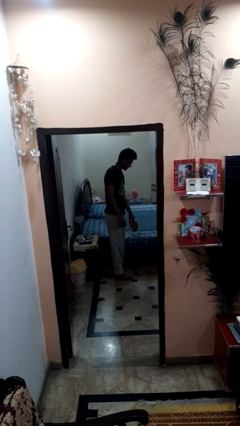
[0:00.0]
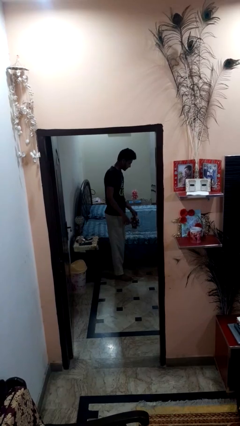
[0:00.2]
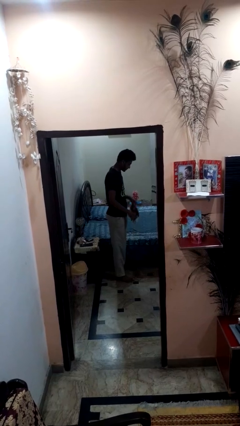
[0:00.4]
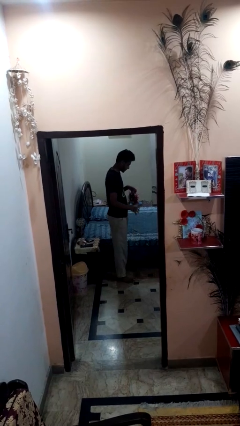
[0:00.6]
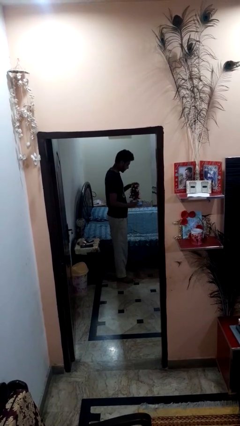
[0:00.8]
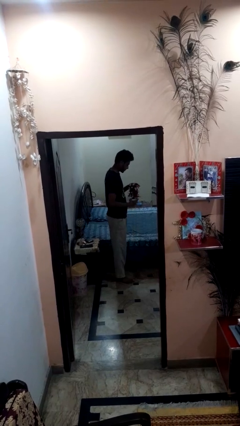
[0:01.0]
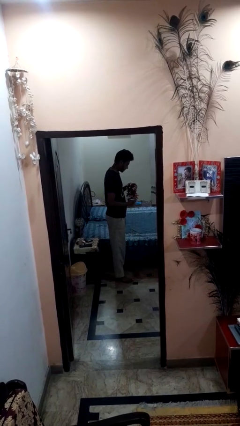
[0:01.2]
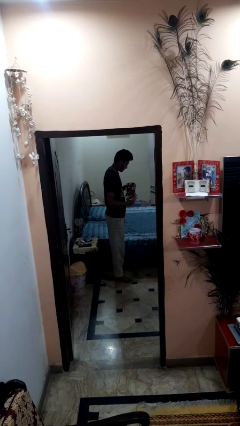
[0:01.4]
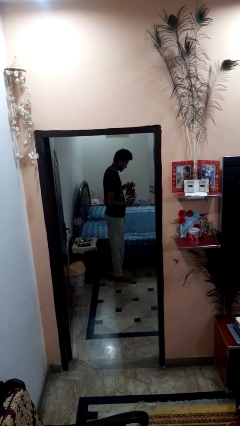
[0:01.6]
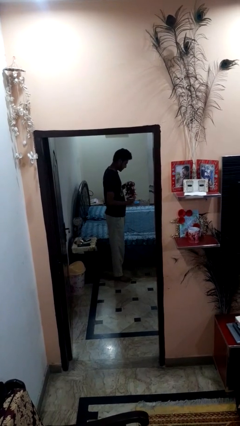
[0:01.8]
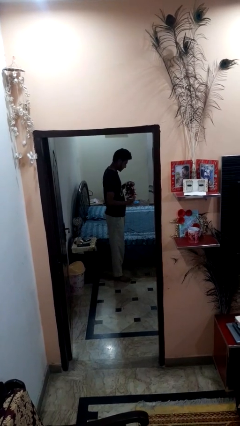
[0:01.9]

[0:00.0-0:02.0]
person picks up object from bed

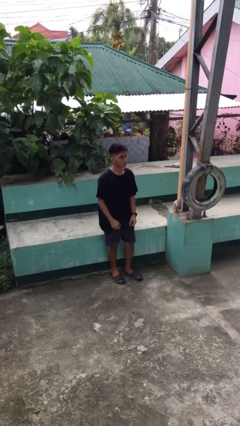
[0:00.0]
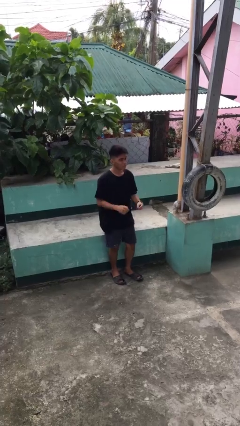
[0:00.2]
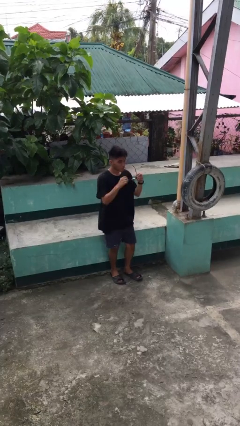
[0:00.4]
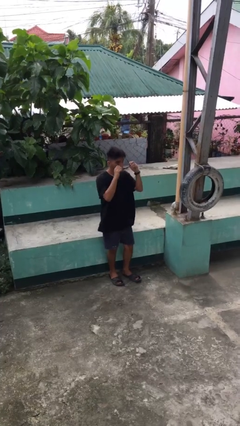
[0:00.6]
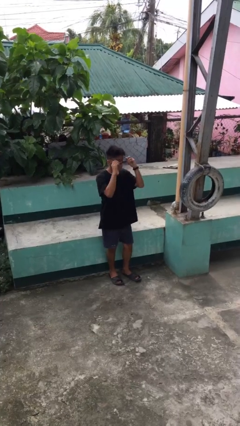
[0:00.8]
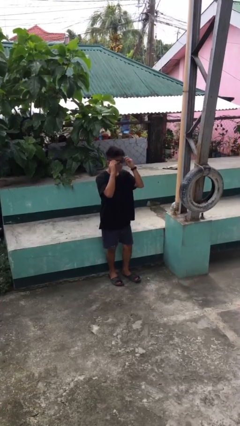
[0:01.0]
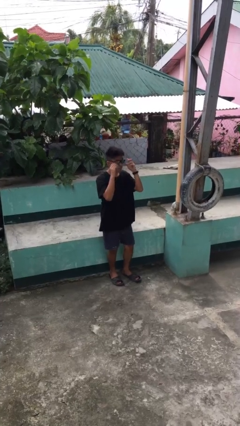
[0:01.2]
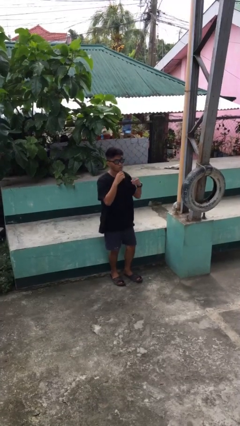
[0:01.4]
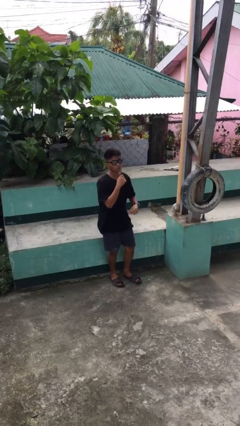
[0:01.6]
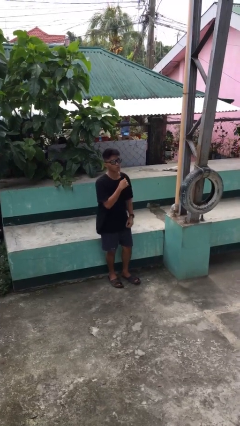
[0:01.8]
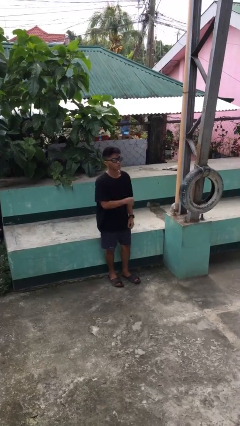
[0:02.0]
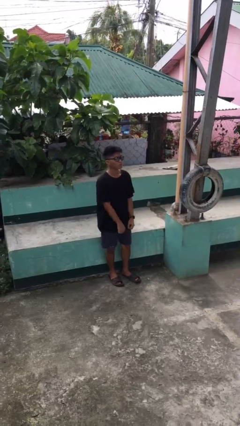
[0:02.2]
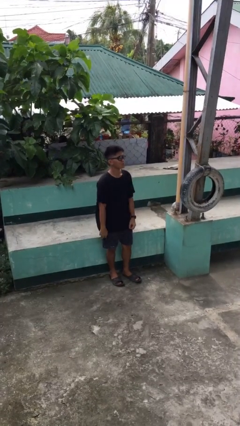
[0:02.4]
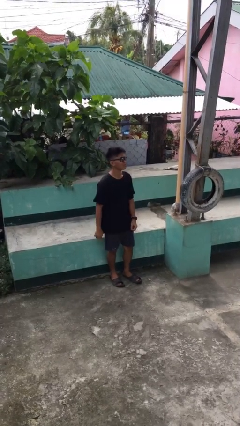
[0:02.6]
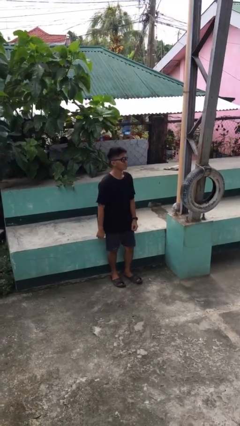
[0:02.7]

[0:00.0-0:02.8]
person puts on sunglasses

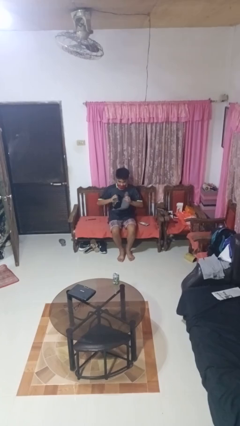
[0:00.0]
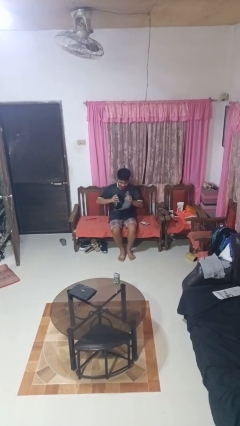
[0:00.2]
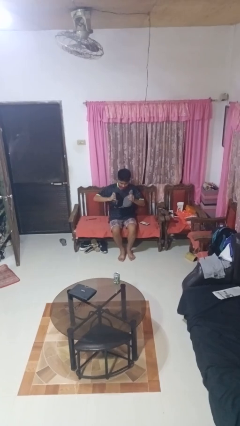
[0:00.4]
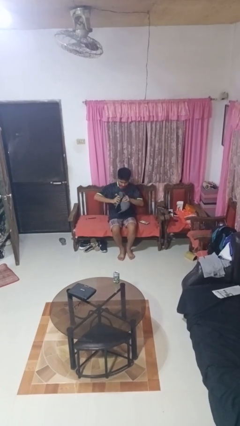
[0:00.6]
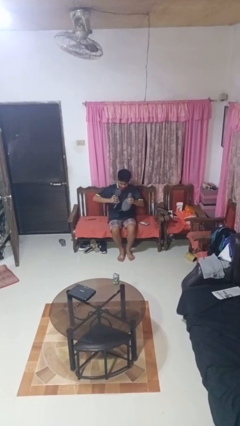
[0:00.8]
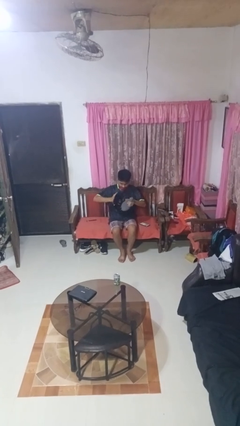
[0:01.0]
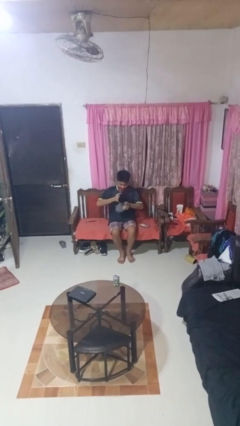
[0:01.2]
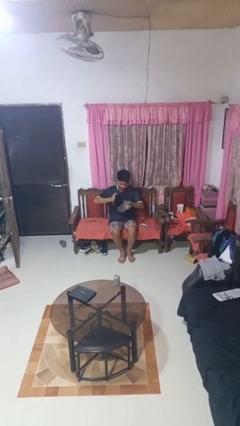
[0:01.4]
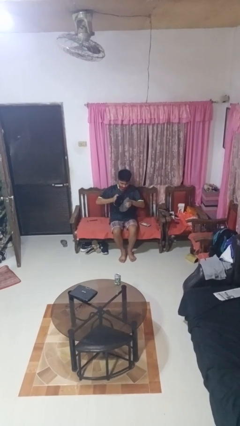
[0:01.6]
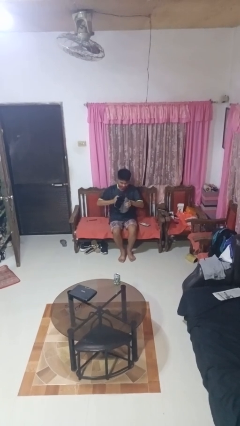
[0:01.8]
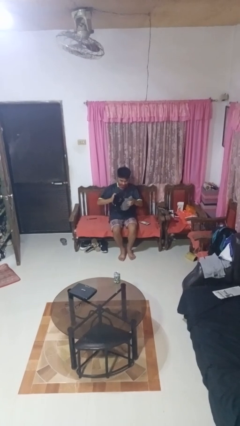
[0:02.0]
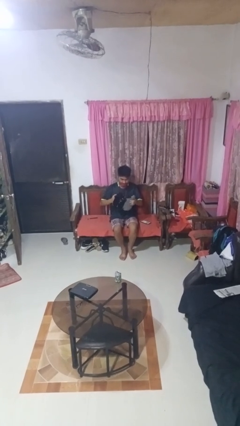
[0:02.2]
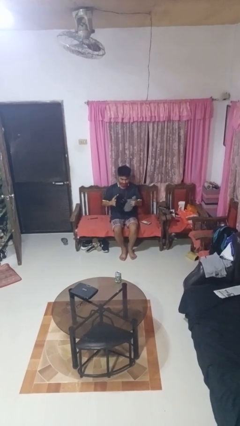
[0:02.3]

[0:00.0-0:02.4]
person squeezes object

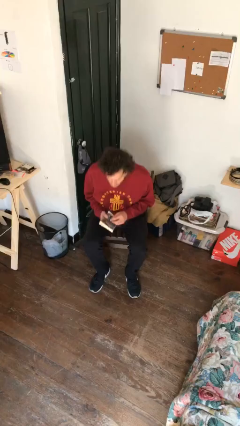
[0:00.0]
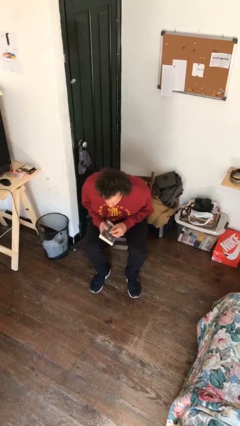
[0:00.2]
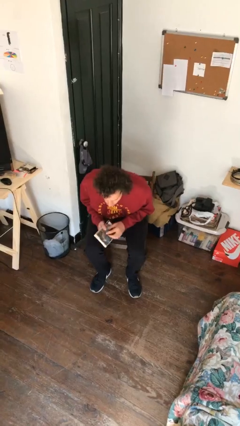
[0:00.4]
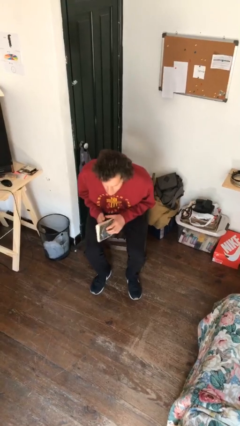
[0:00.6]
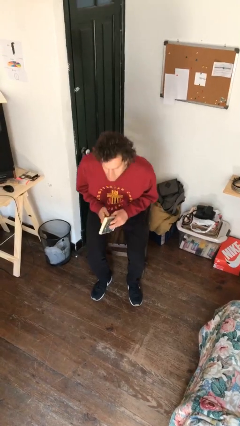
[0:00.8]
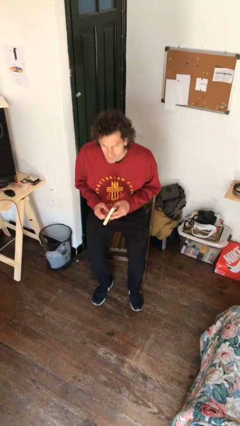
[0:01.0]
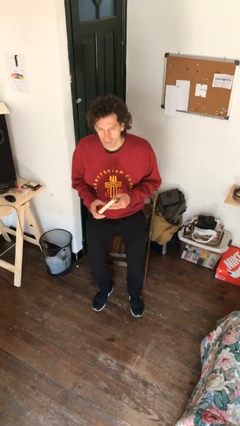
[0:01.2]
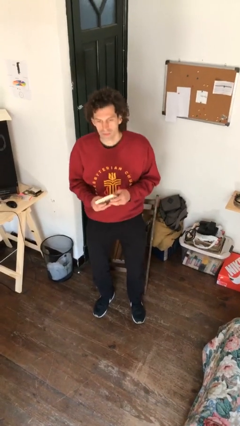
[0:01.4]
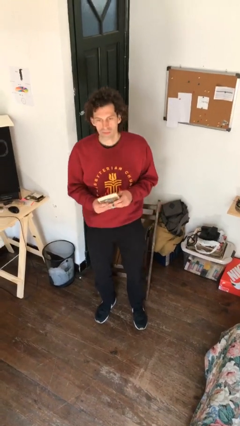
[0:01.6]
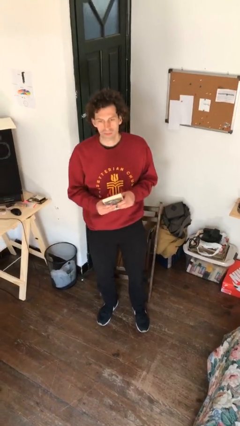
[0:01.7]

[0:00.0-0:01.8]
person stands up

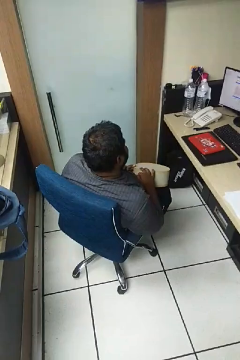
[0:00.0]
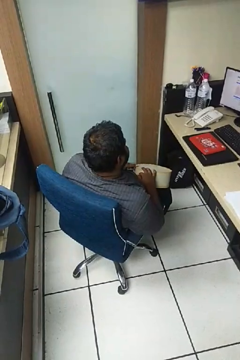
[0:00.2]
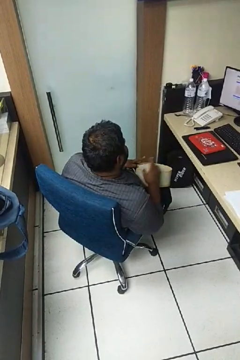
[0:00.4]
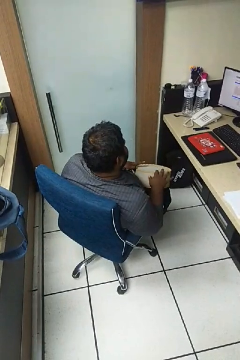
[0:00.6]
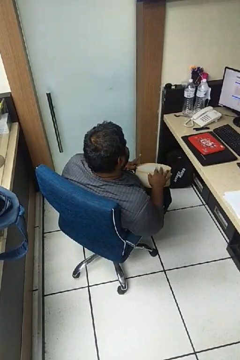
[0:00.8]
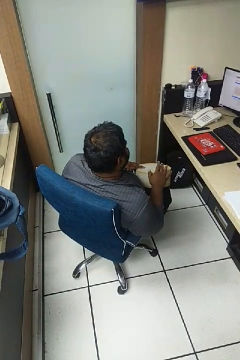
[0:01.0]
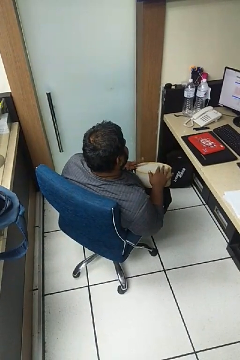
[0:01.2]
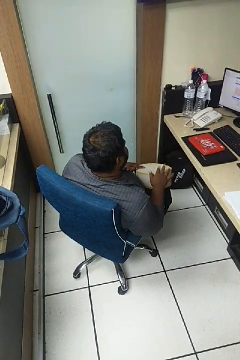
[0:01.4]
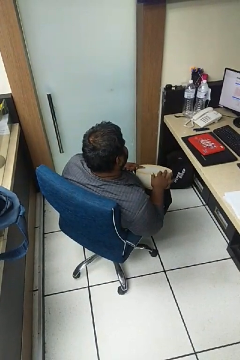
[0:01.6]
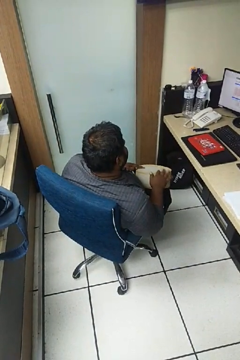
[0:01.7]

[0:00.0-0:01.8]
person taps object with finger

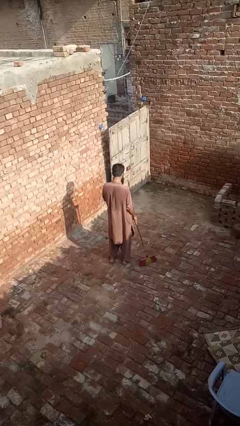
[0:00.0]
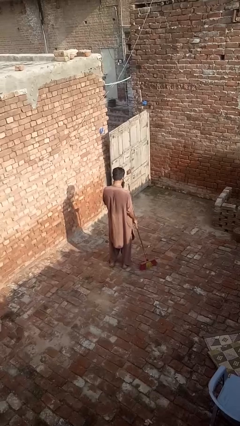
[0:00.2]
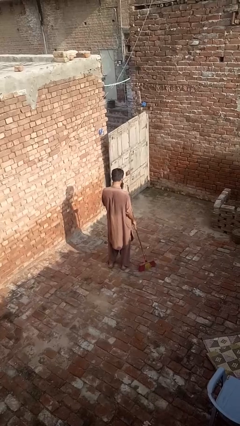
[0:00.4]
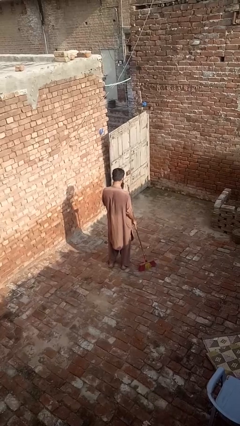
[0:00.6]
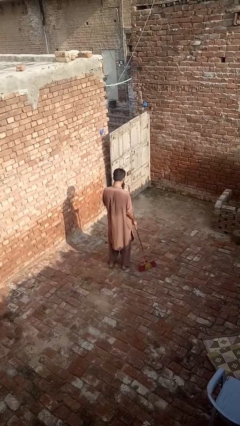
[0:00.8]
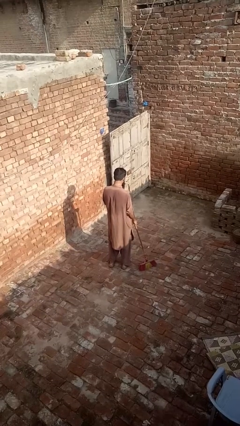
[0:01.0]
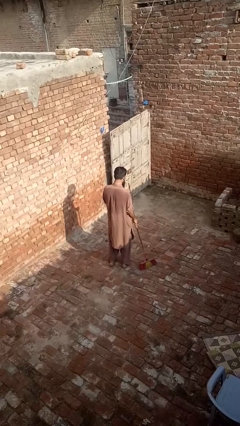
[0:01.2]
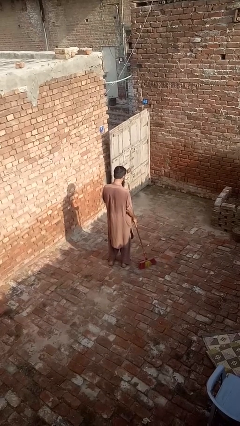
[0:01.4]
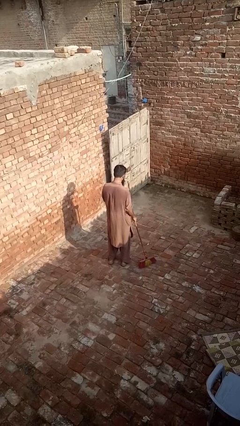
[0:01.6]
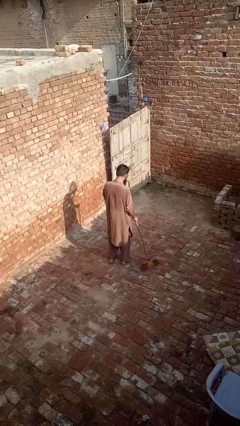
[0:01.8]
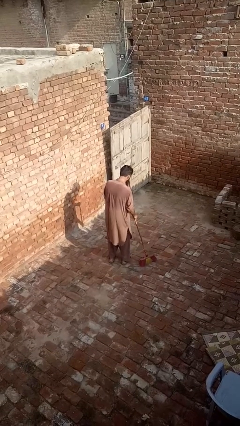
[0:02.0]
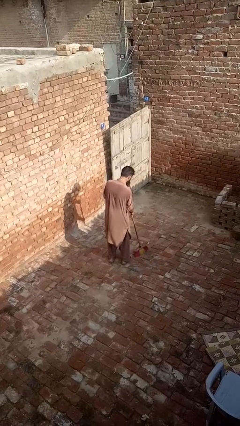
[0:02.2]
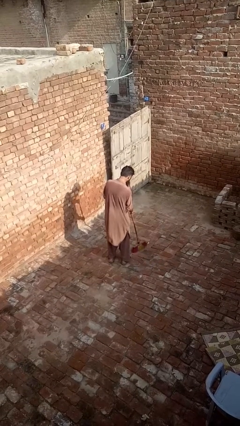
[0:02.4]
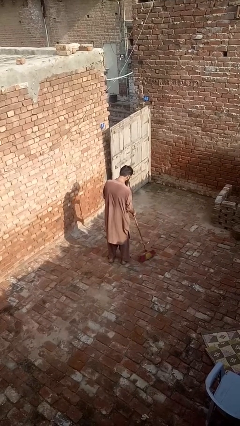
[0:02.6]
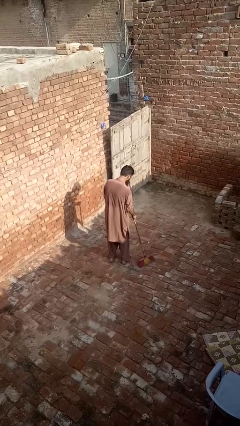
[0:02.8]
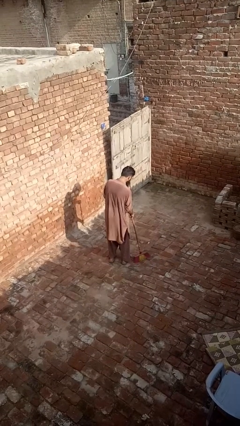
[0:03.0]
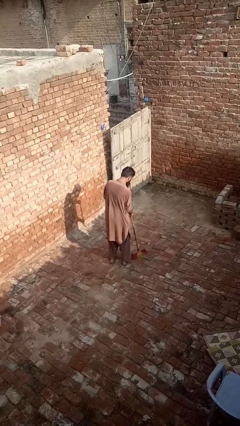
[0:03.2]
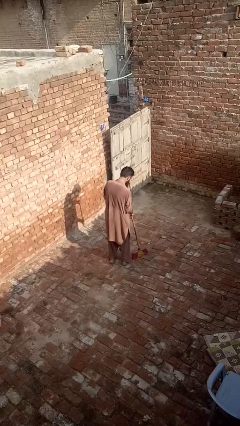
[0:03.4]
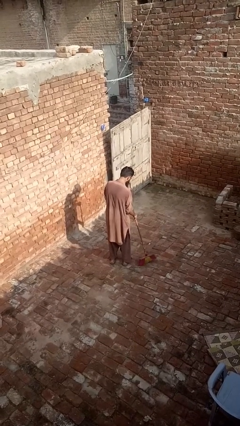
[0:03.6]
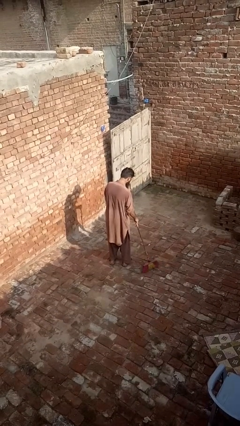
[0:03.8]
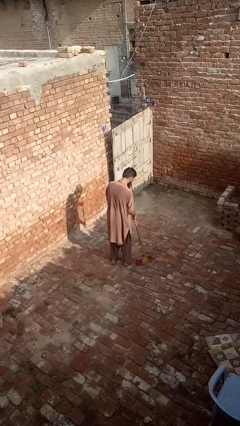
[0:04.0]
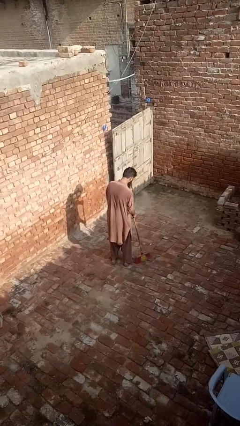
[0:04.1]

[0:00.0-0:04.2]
person sweeps floor

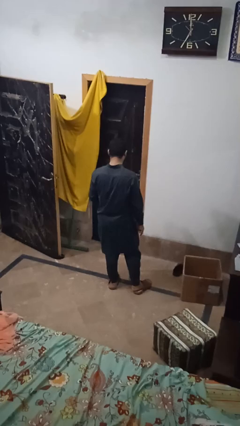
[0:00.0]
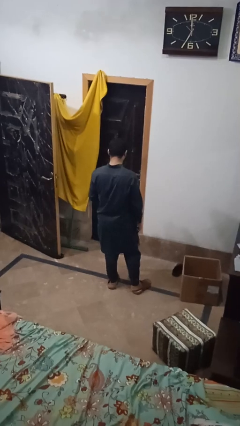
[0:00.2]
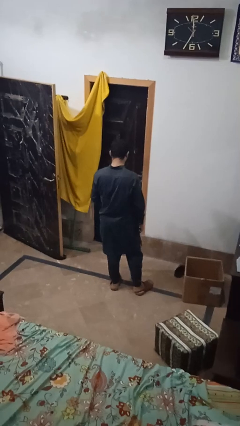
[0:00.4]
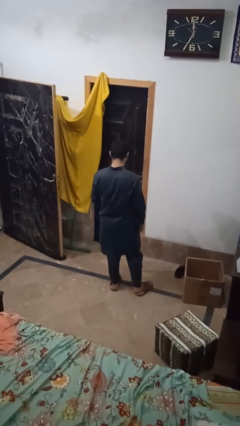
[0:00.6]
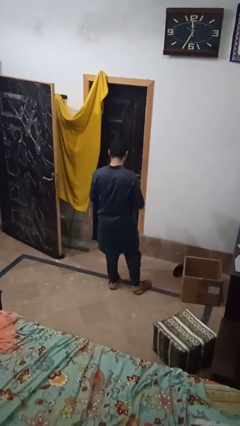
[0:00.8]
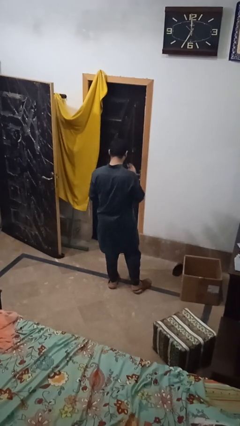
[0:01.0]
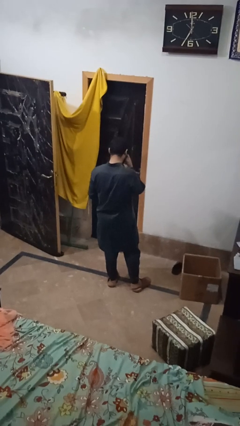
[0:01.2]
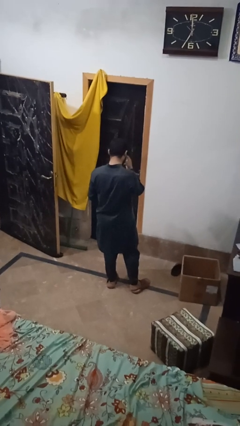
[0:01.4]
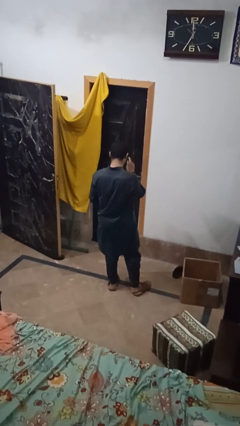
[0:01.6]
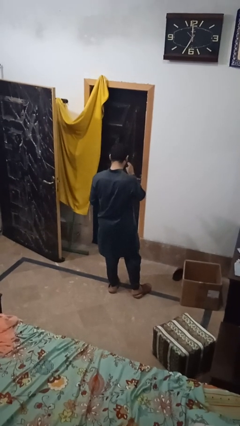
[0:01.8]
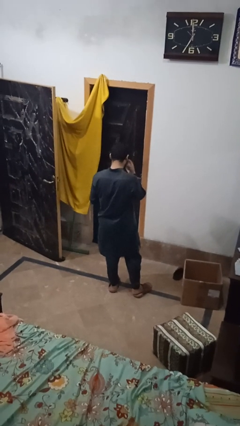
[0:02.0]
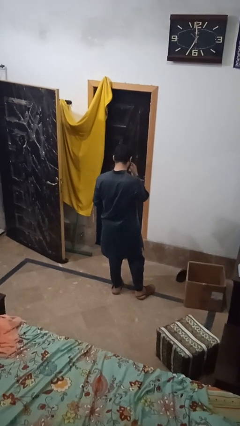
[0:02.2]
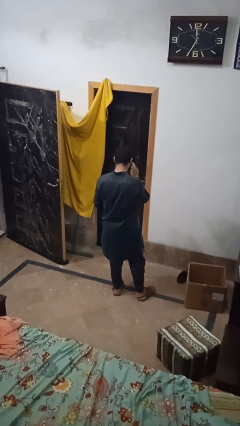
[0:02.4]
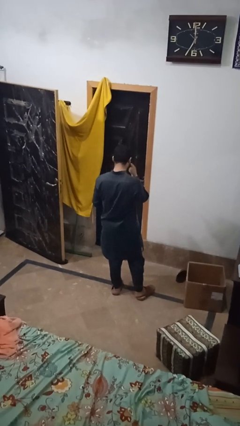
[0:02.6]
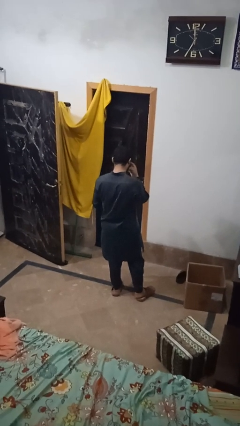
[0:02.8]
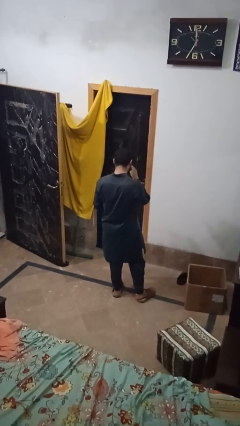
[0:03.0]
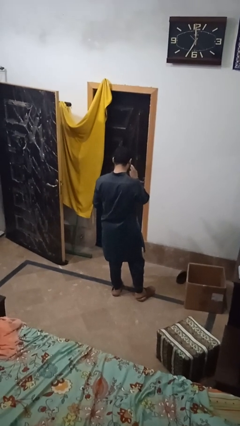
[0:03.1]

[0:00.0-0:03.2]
person gestures watch closely
